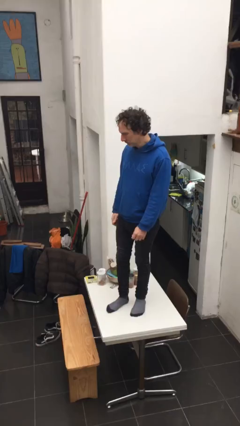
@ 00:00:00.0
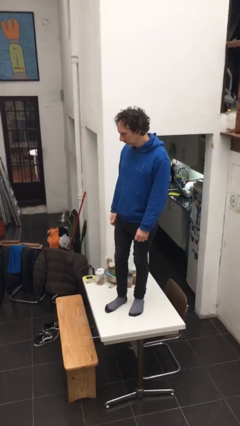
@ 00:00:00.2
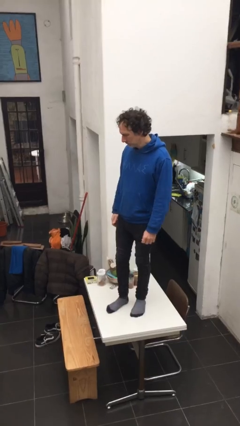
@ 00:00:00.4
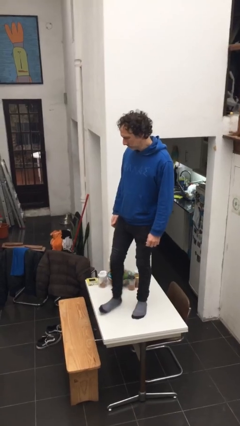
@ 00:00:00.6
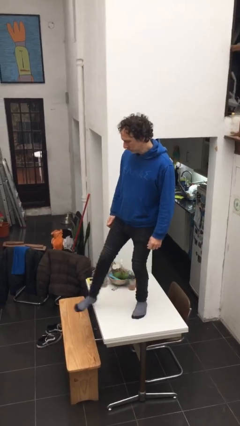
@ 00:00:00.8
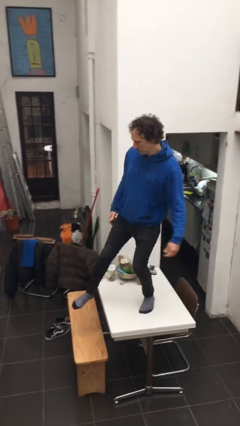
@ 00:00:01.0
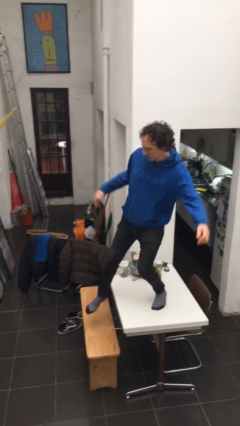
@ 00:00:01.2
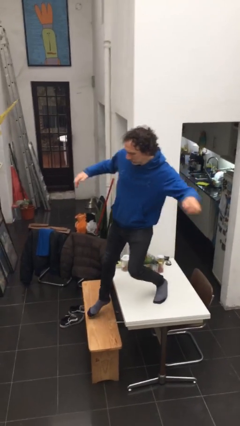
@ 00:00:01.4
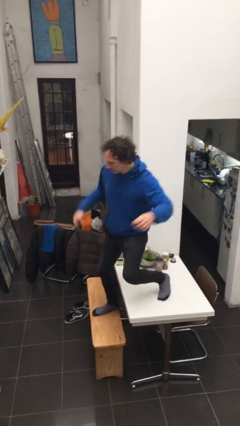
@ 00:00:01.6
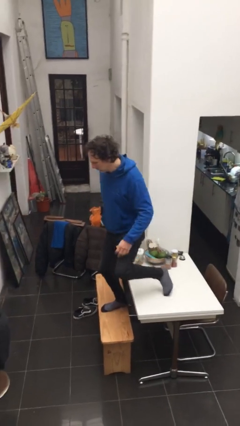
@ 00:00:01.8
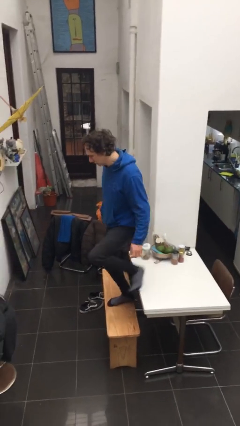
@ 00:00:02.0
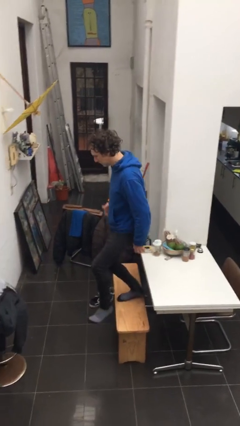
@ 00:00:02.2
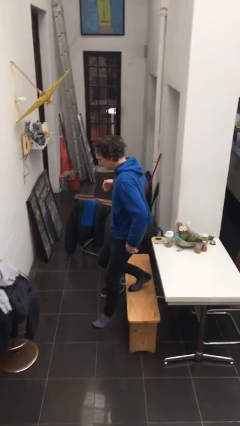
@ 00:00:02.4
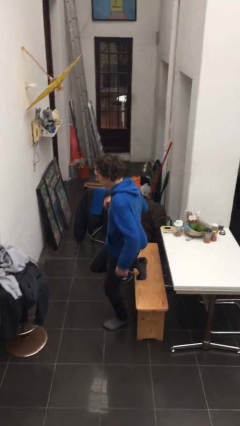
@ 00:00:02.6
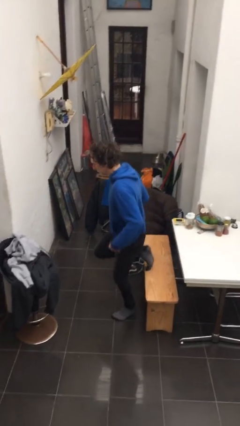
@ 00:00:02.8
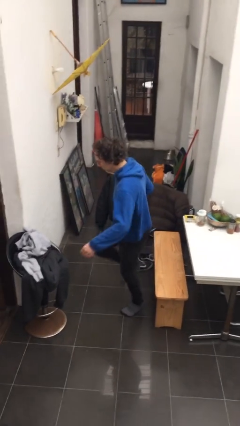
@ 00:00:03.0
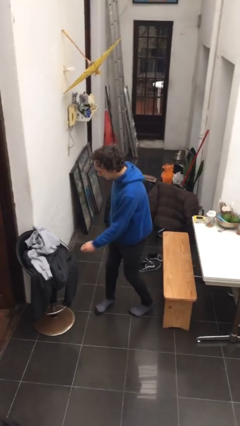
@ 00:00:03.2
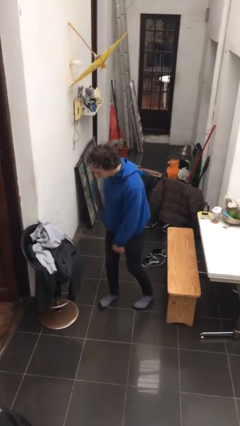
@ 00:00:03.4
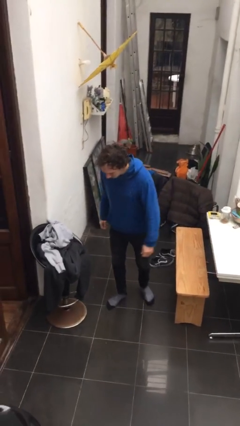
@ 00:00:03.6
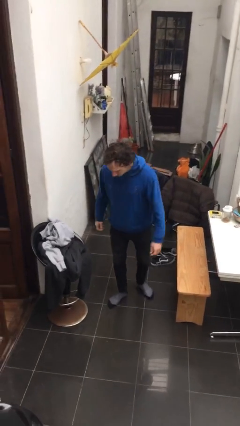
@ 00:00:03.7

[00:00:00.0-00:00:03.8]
person climbs off table

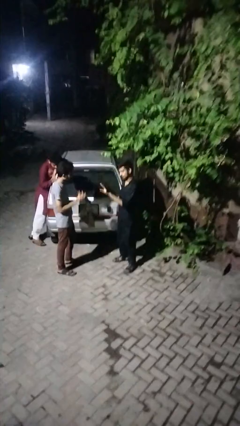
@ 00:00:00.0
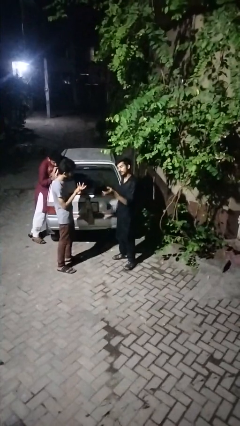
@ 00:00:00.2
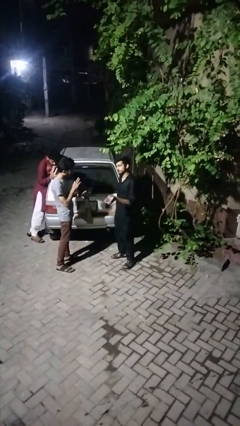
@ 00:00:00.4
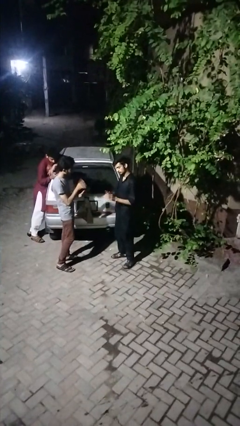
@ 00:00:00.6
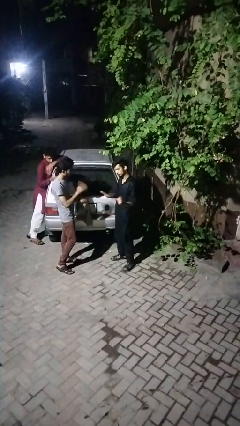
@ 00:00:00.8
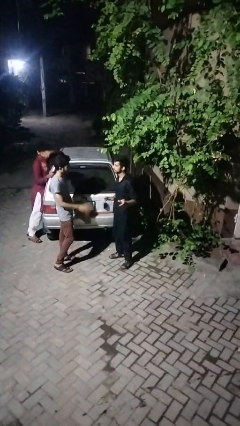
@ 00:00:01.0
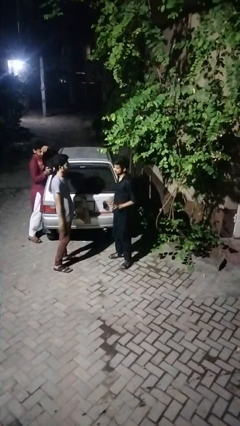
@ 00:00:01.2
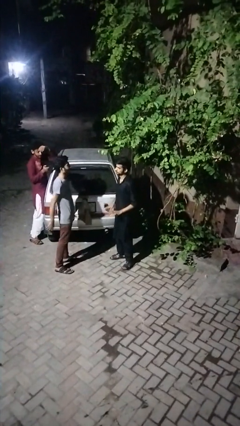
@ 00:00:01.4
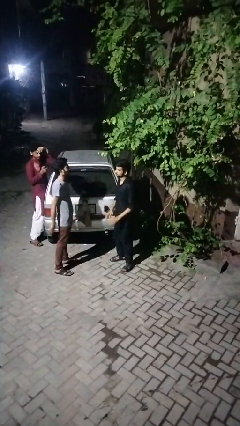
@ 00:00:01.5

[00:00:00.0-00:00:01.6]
person talks to person

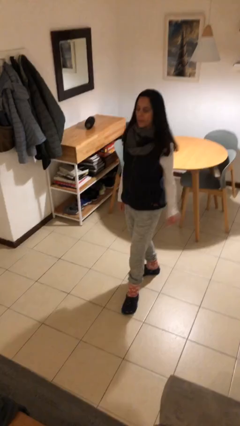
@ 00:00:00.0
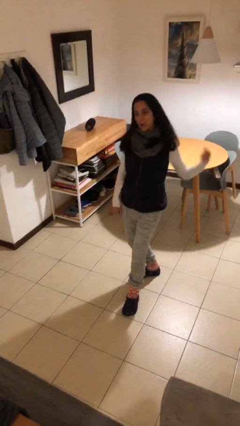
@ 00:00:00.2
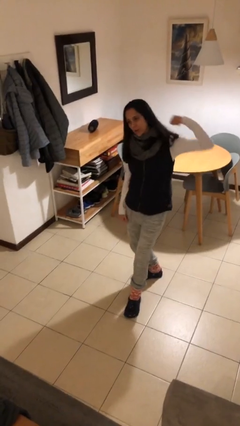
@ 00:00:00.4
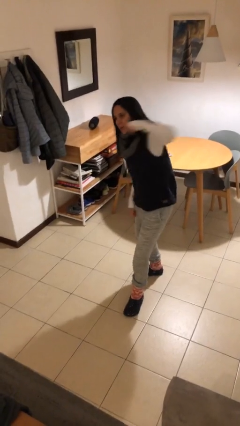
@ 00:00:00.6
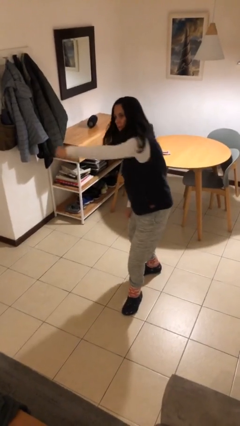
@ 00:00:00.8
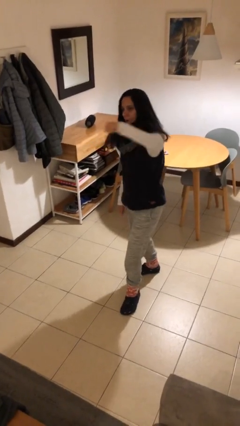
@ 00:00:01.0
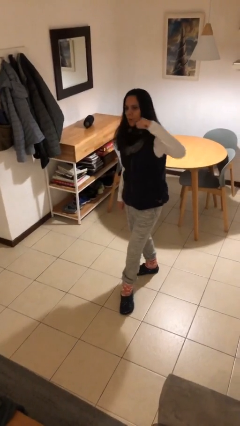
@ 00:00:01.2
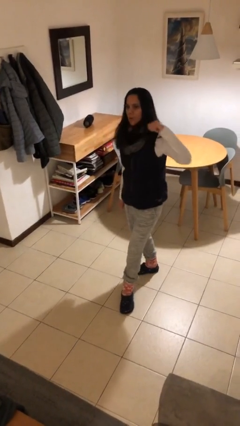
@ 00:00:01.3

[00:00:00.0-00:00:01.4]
person punches

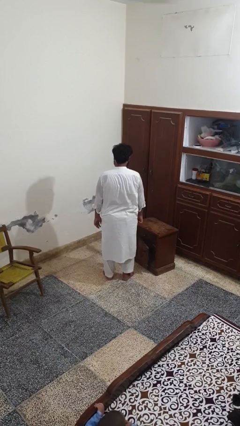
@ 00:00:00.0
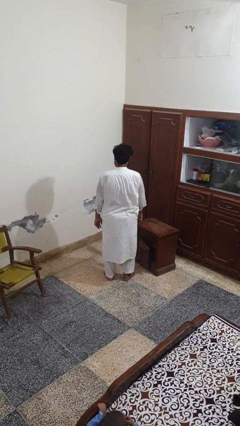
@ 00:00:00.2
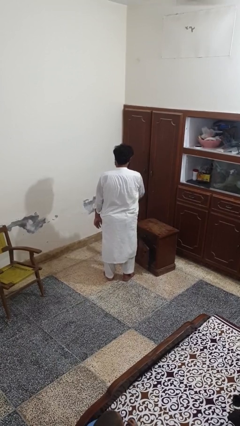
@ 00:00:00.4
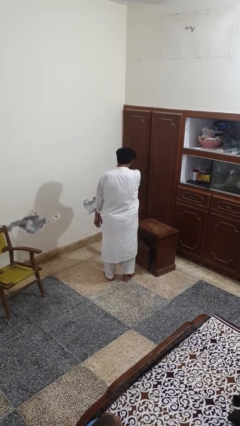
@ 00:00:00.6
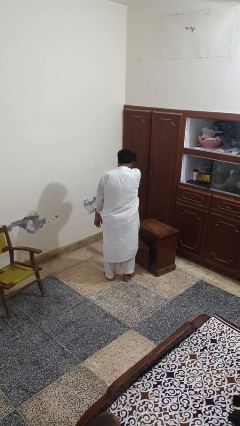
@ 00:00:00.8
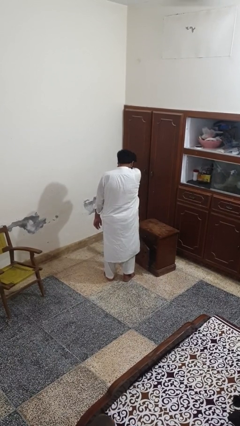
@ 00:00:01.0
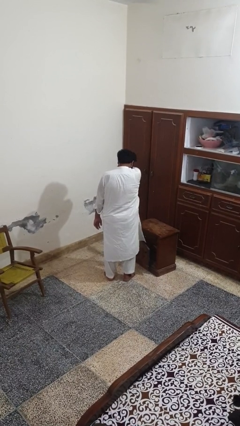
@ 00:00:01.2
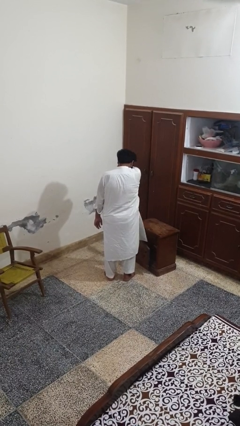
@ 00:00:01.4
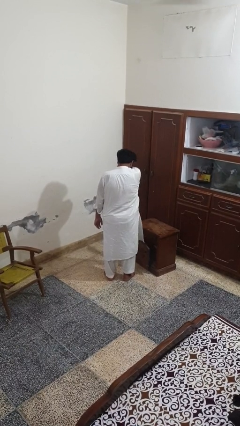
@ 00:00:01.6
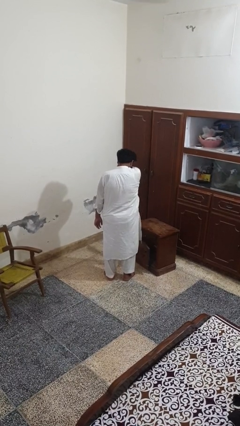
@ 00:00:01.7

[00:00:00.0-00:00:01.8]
person sneezes into arm

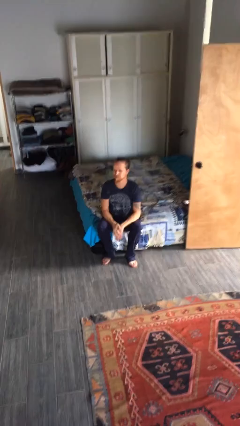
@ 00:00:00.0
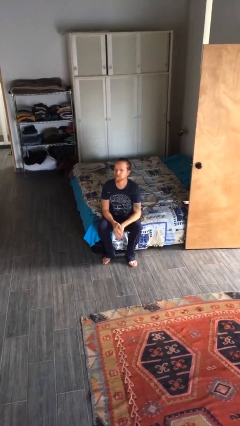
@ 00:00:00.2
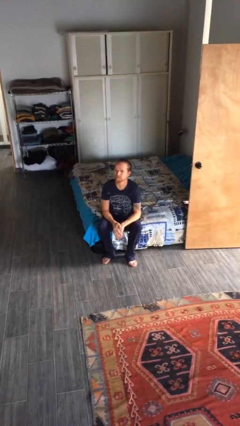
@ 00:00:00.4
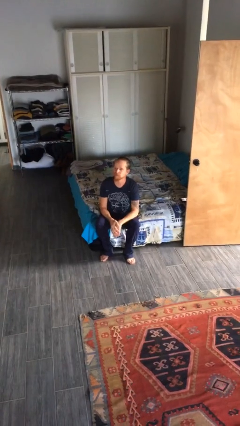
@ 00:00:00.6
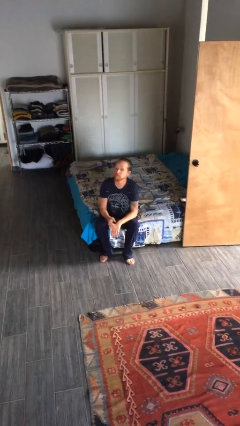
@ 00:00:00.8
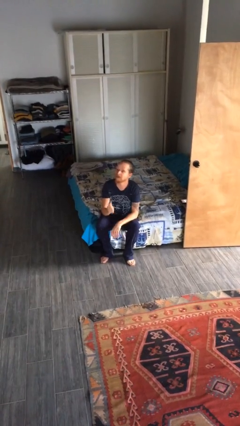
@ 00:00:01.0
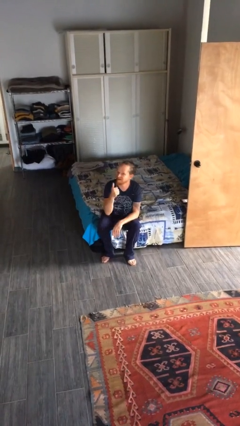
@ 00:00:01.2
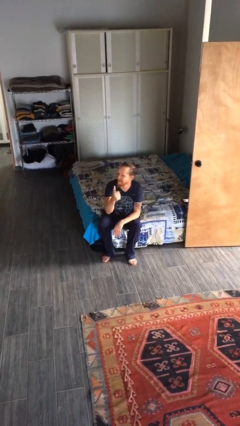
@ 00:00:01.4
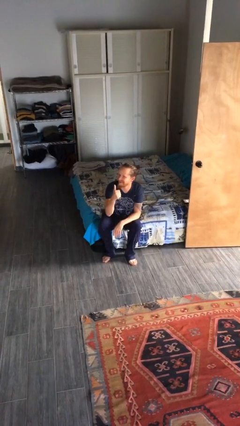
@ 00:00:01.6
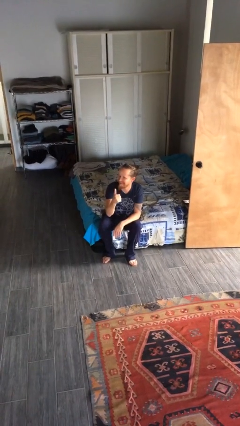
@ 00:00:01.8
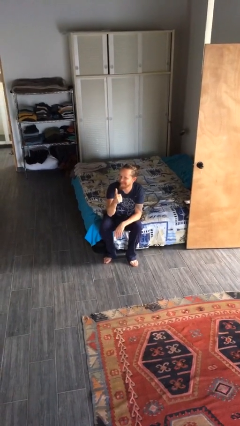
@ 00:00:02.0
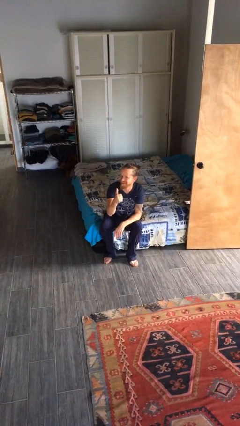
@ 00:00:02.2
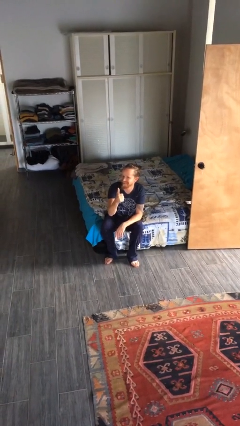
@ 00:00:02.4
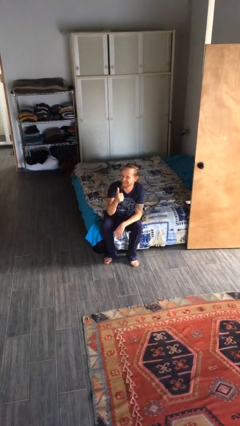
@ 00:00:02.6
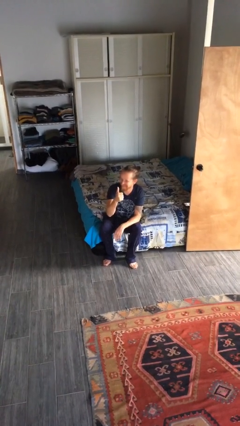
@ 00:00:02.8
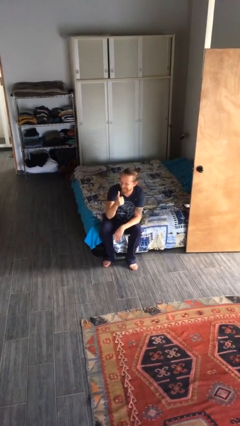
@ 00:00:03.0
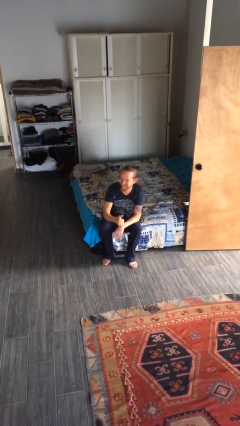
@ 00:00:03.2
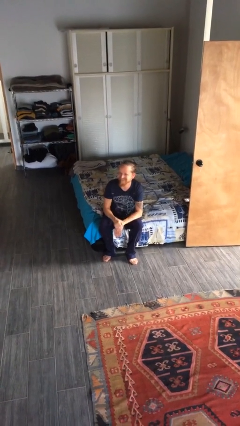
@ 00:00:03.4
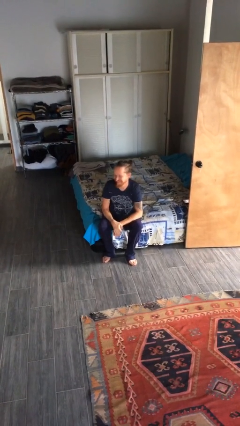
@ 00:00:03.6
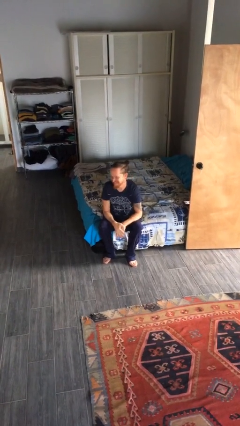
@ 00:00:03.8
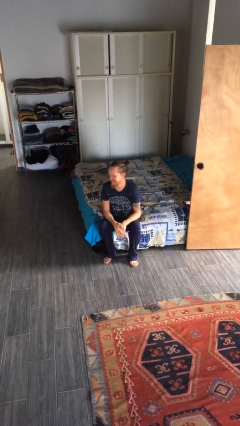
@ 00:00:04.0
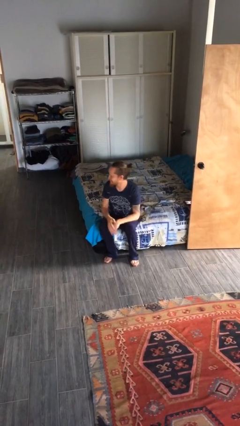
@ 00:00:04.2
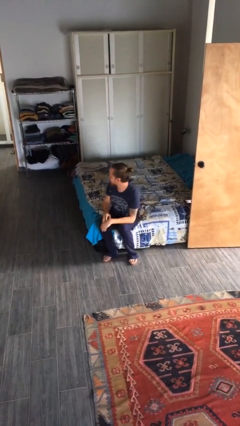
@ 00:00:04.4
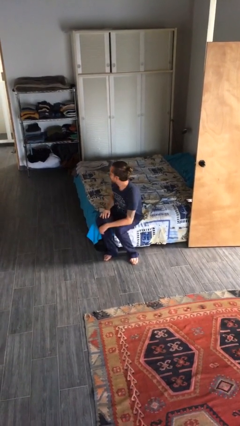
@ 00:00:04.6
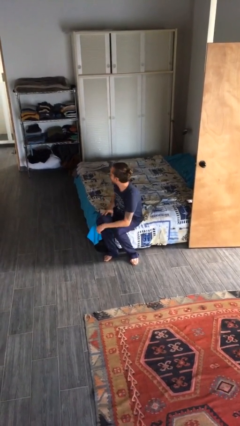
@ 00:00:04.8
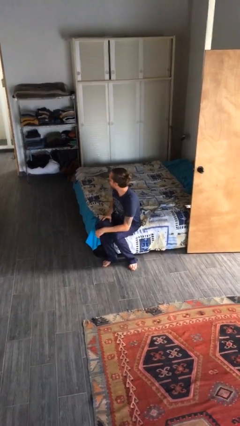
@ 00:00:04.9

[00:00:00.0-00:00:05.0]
person gestures thumbs up

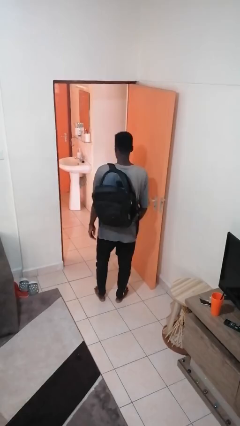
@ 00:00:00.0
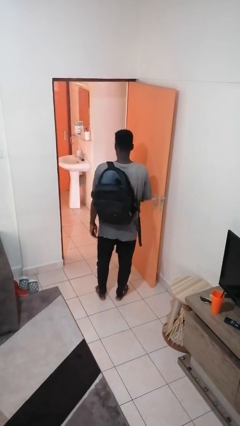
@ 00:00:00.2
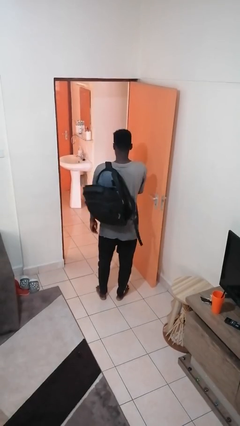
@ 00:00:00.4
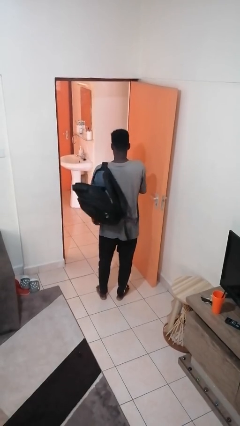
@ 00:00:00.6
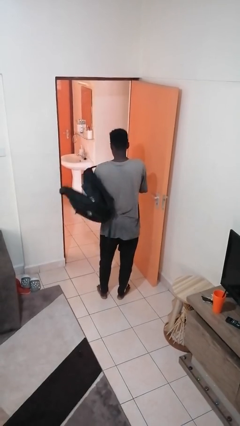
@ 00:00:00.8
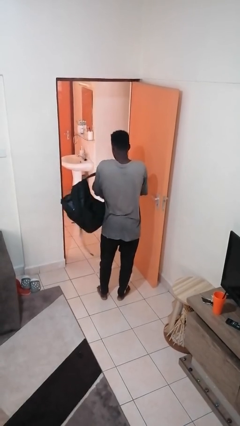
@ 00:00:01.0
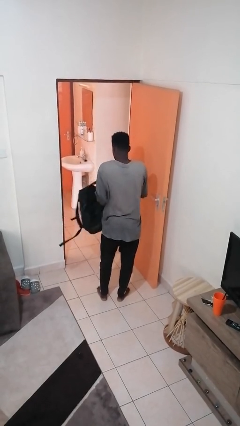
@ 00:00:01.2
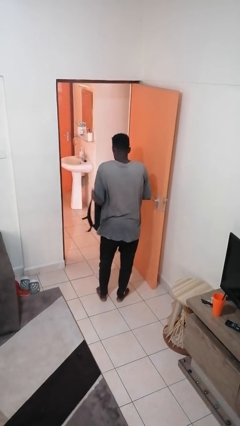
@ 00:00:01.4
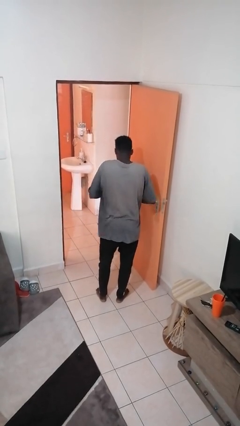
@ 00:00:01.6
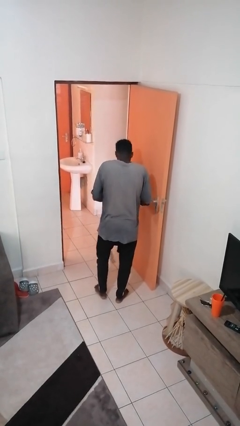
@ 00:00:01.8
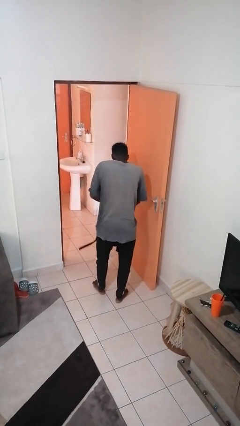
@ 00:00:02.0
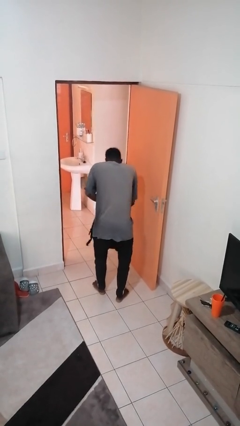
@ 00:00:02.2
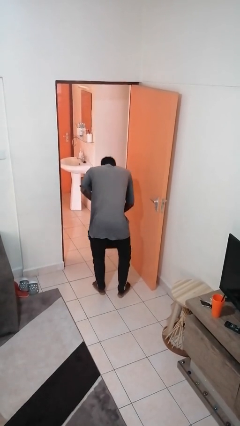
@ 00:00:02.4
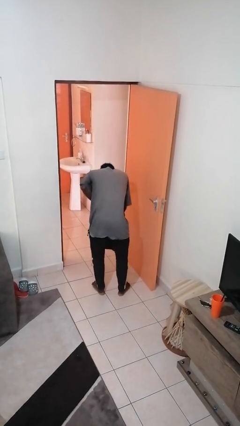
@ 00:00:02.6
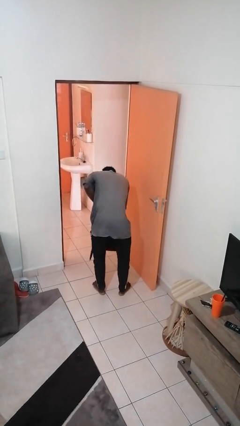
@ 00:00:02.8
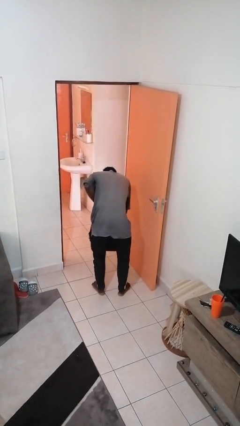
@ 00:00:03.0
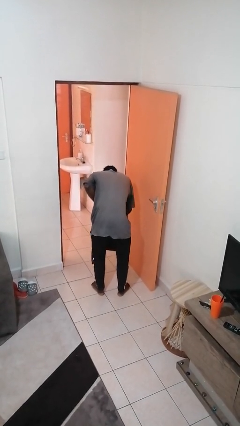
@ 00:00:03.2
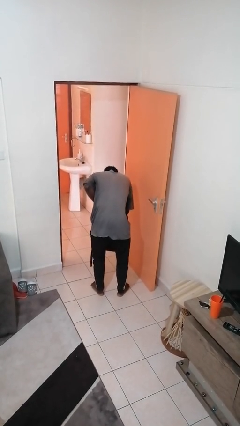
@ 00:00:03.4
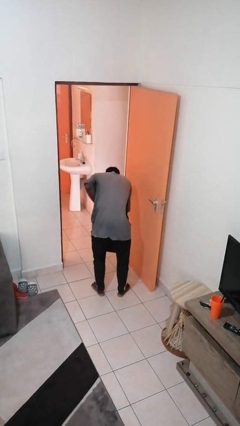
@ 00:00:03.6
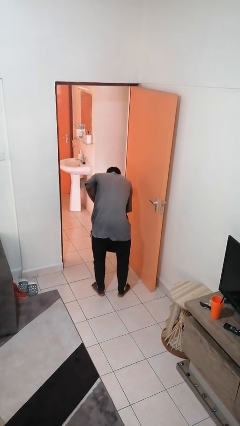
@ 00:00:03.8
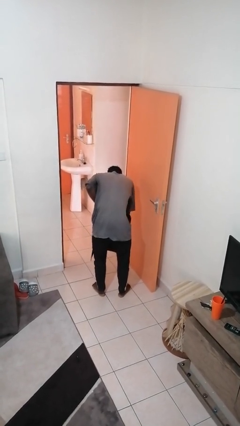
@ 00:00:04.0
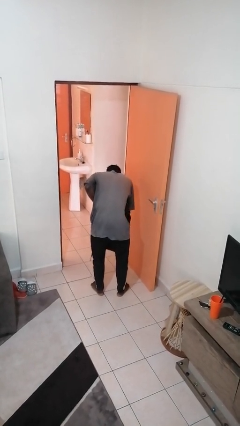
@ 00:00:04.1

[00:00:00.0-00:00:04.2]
person searches in backpack
